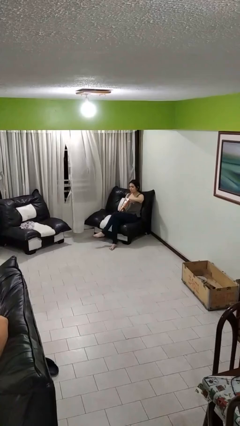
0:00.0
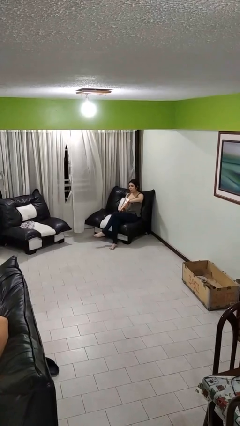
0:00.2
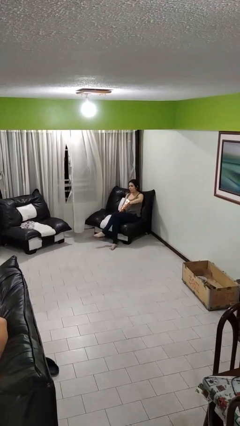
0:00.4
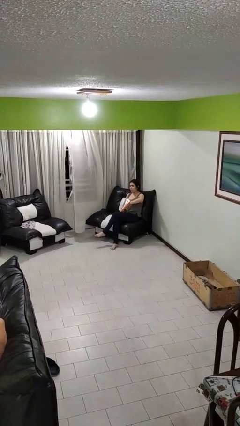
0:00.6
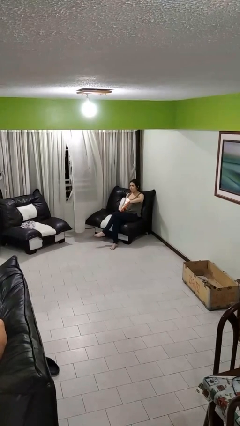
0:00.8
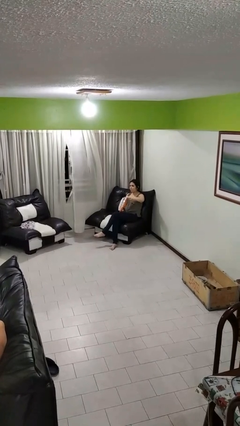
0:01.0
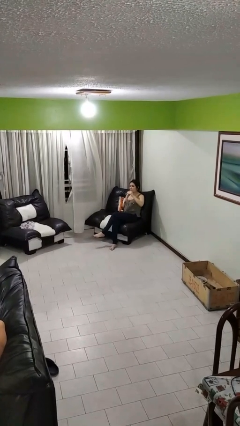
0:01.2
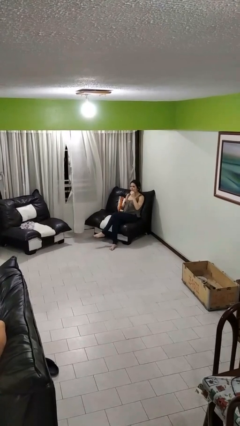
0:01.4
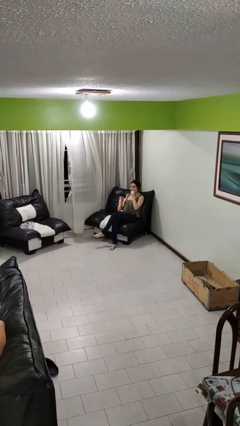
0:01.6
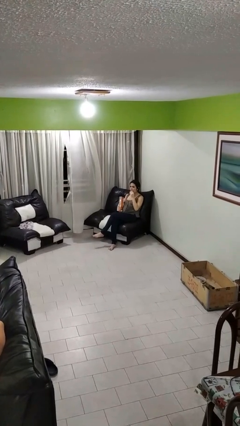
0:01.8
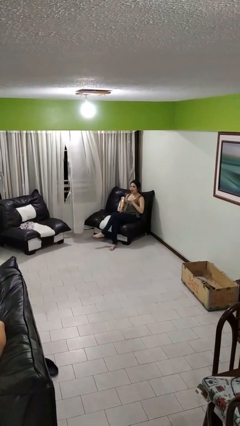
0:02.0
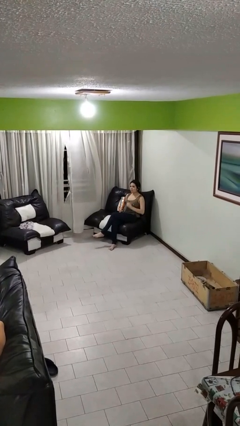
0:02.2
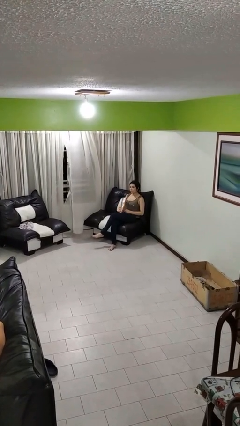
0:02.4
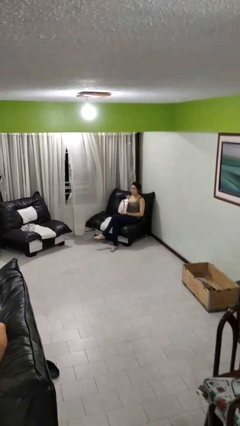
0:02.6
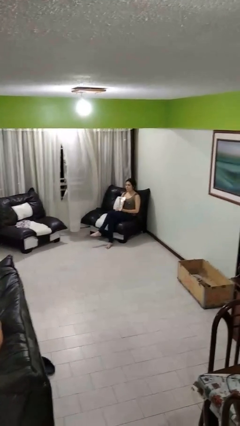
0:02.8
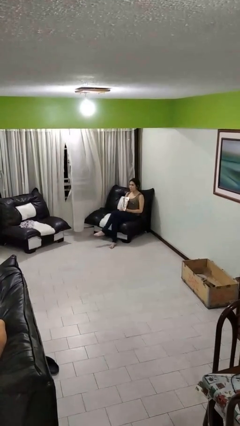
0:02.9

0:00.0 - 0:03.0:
person eats snack from bag

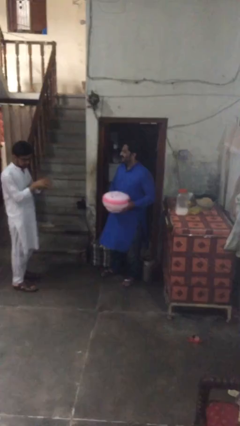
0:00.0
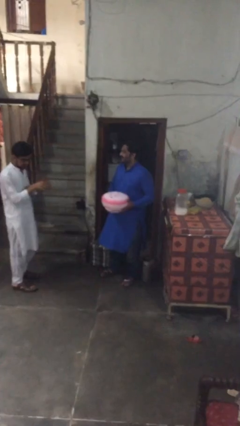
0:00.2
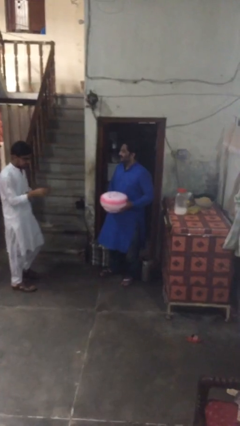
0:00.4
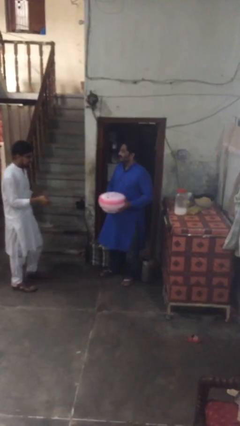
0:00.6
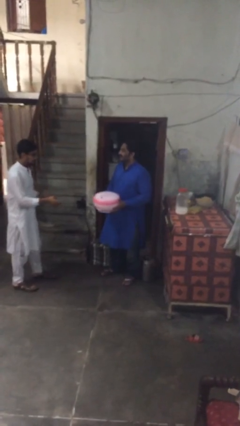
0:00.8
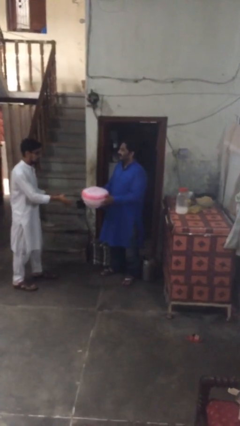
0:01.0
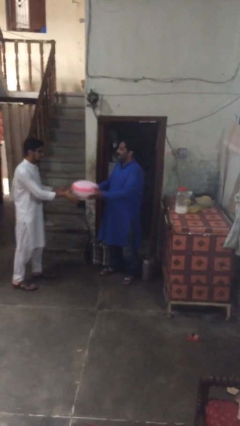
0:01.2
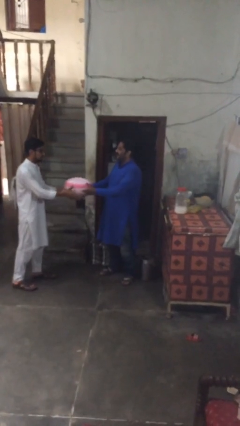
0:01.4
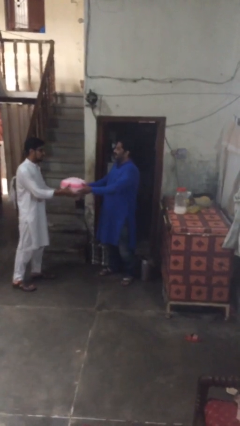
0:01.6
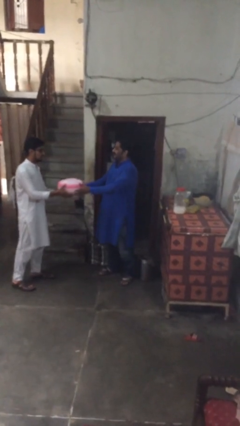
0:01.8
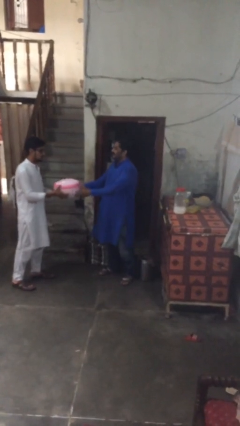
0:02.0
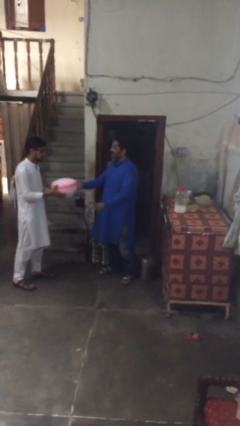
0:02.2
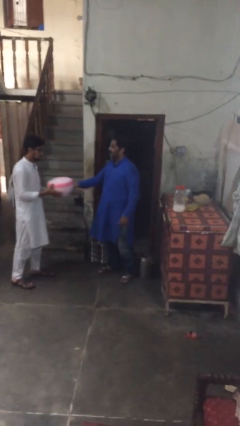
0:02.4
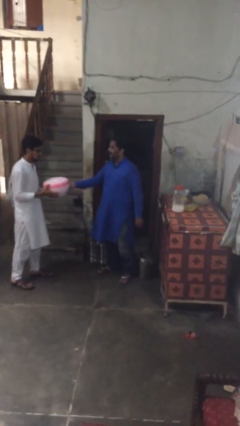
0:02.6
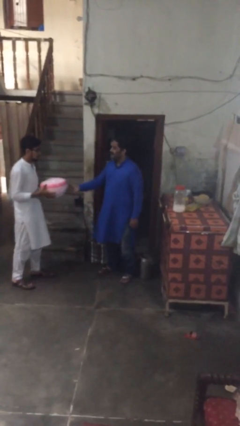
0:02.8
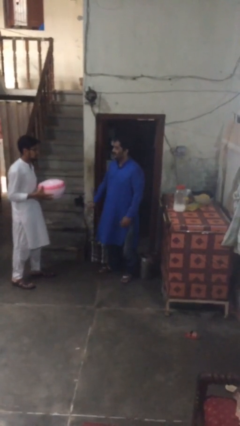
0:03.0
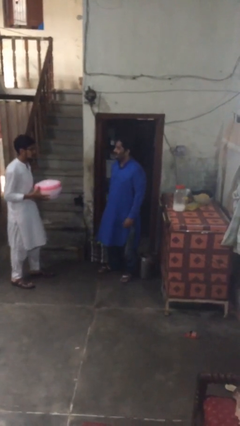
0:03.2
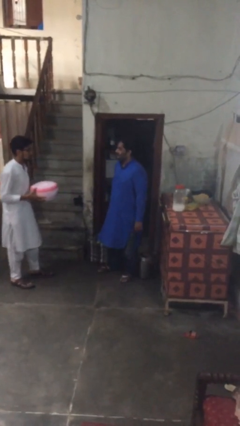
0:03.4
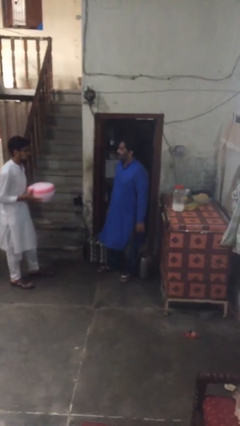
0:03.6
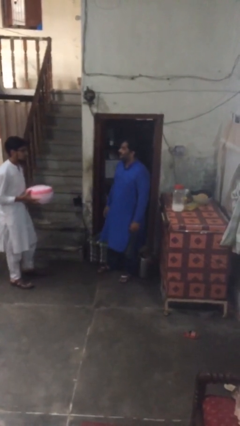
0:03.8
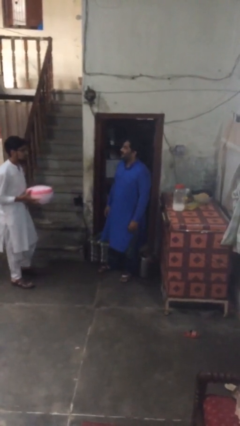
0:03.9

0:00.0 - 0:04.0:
person transfers object to person

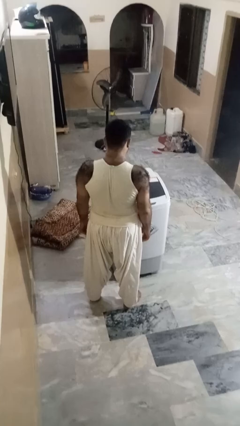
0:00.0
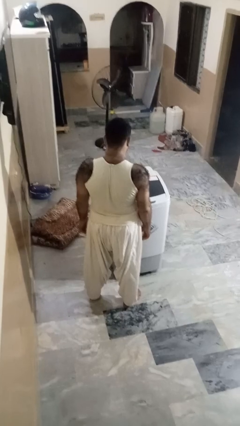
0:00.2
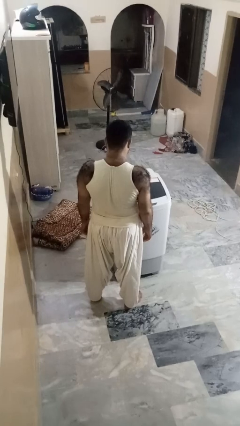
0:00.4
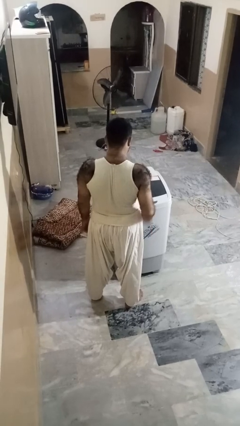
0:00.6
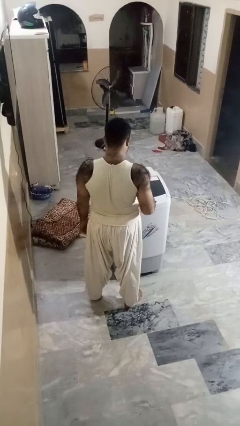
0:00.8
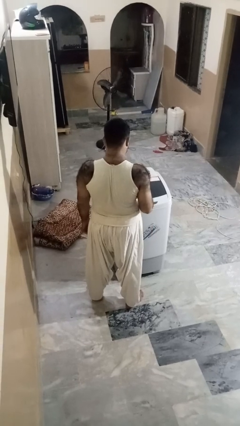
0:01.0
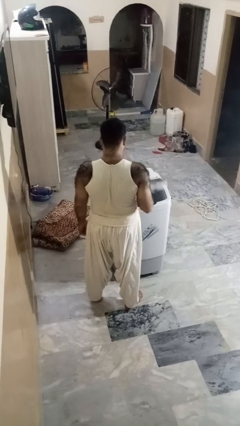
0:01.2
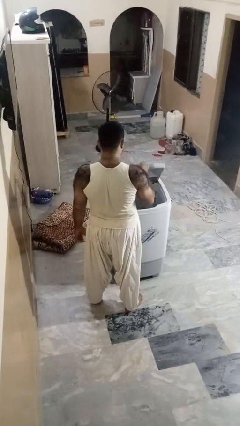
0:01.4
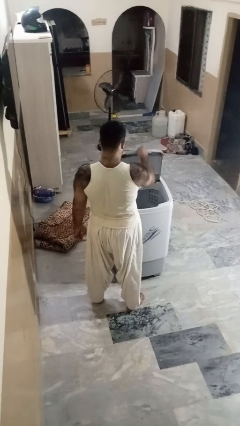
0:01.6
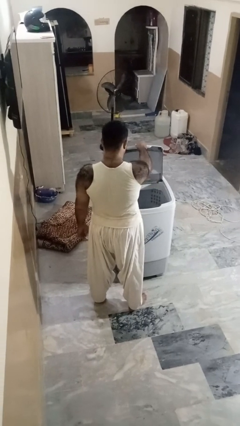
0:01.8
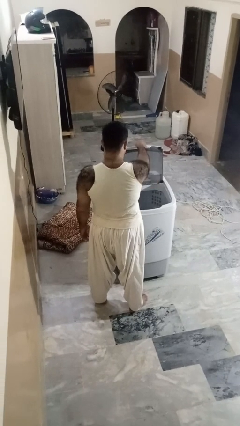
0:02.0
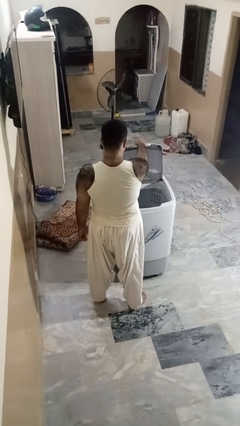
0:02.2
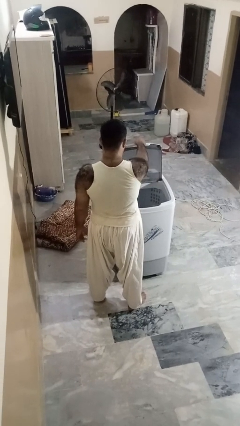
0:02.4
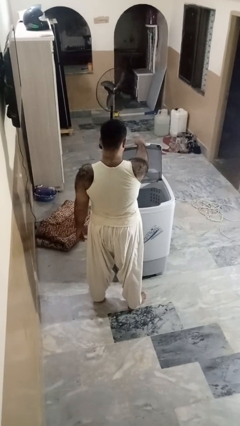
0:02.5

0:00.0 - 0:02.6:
person opens clothes washer

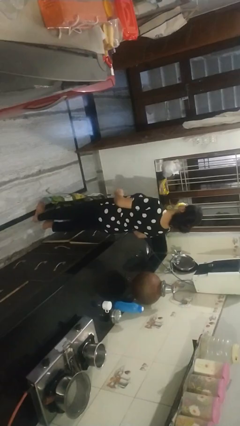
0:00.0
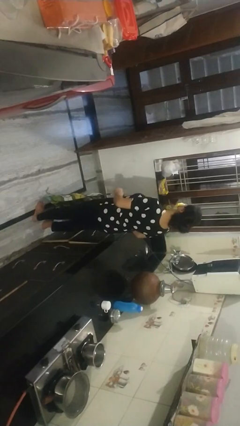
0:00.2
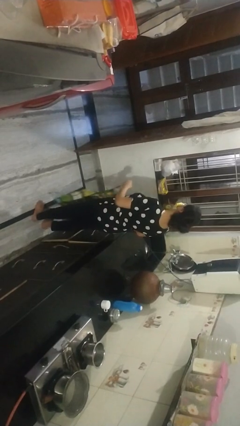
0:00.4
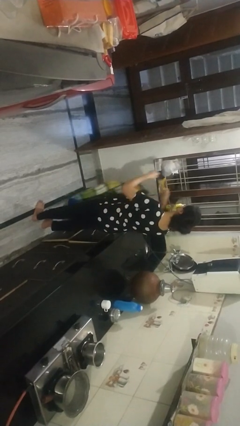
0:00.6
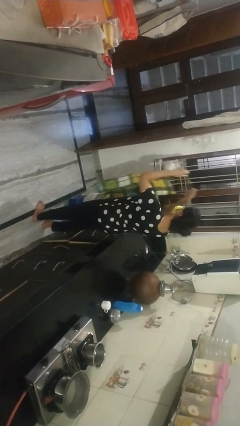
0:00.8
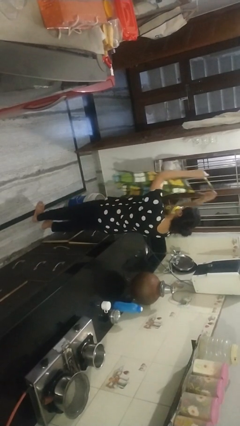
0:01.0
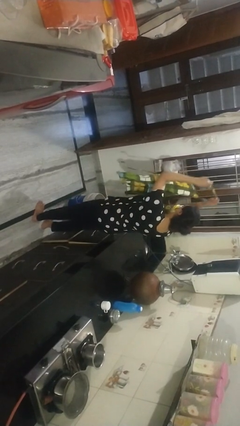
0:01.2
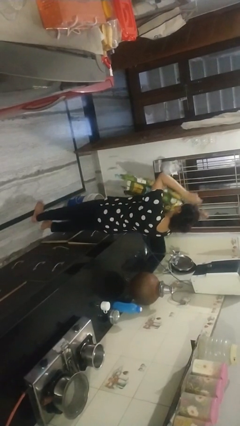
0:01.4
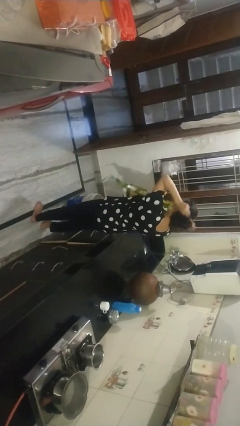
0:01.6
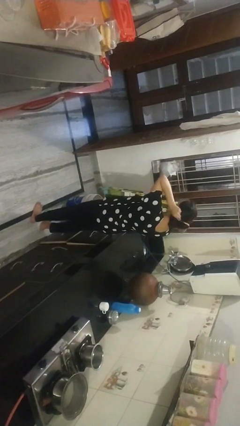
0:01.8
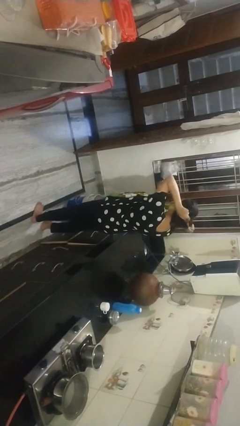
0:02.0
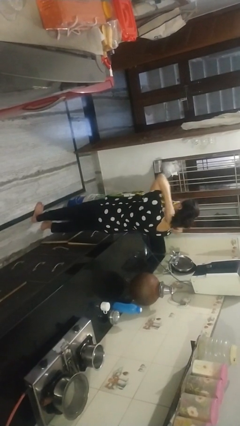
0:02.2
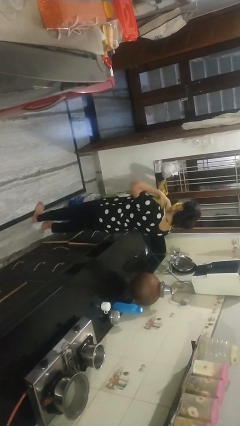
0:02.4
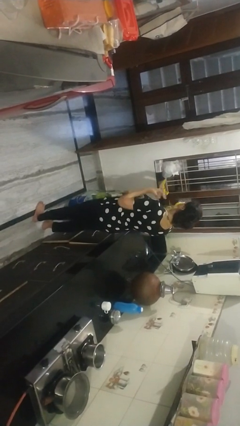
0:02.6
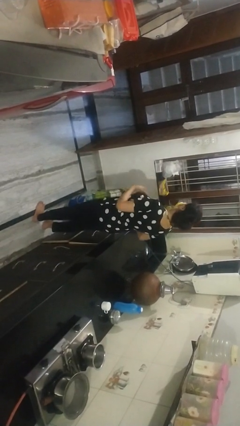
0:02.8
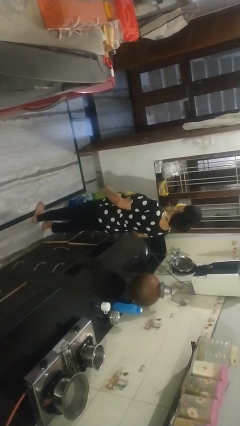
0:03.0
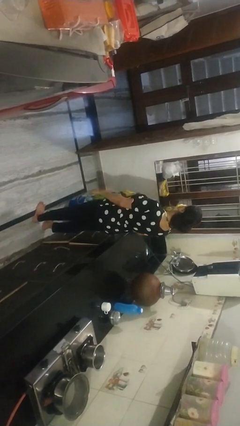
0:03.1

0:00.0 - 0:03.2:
person puts on apron

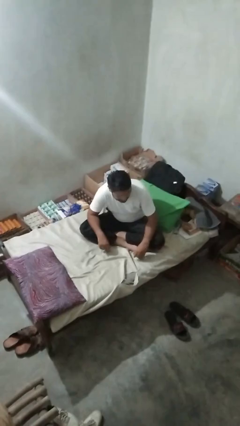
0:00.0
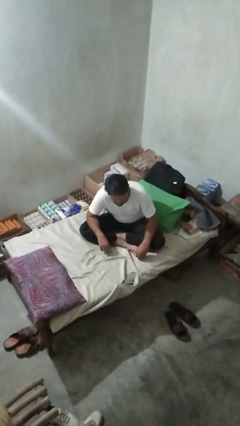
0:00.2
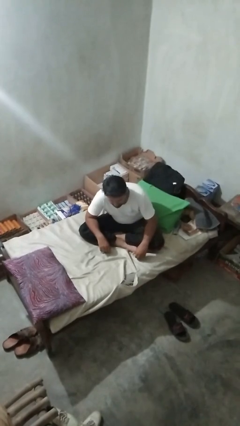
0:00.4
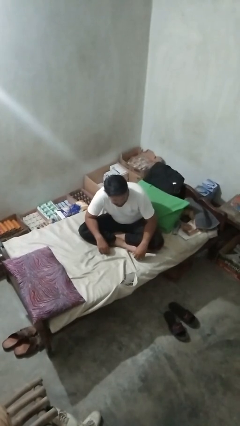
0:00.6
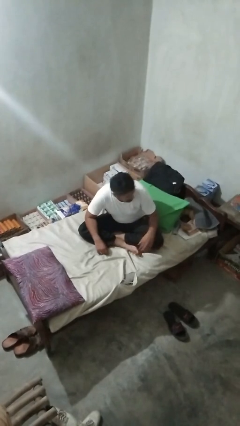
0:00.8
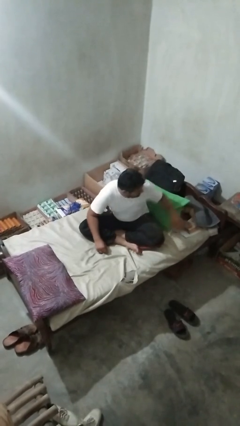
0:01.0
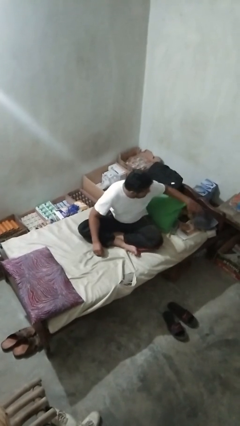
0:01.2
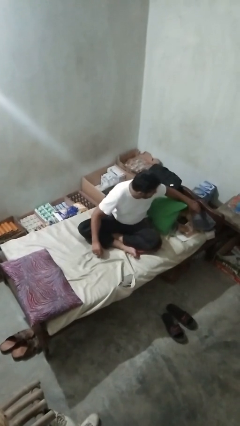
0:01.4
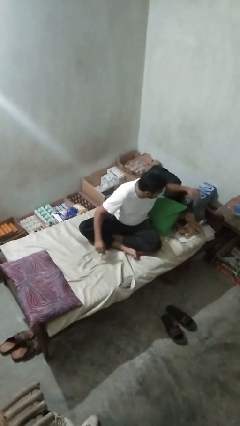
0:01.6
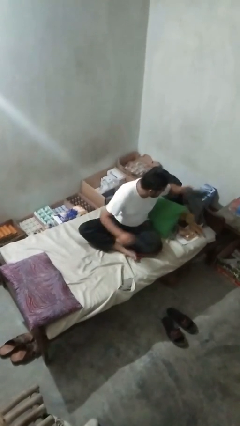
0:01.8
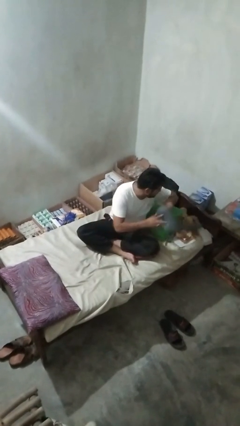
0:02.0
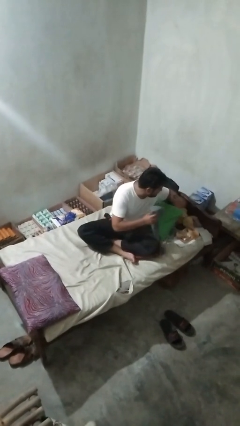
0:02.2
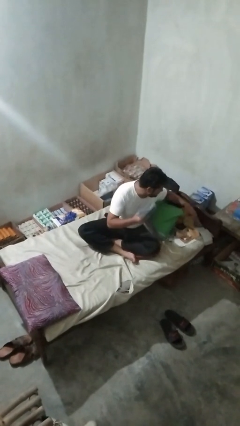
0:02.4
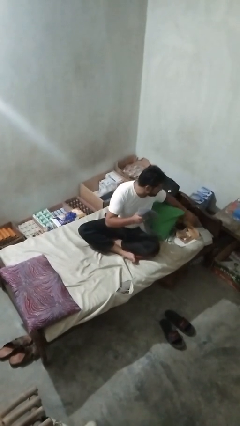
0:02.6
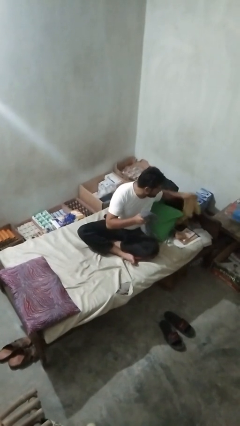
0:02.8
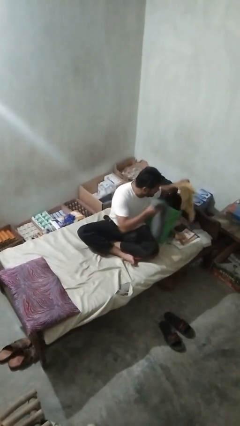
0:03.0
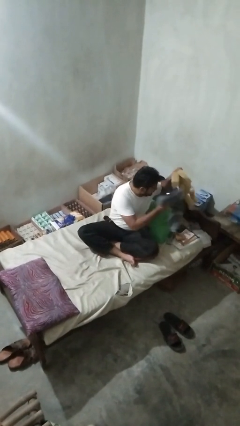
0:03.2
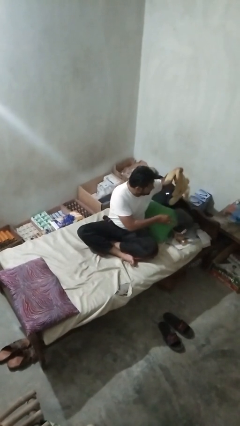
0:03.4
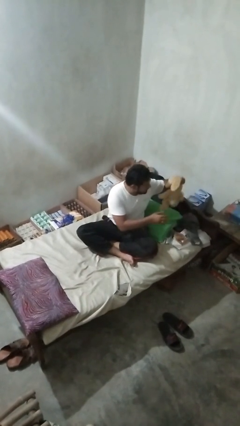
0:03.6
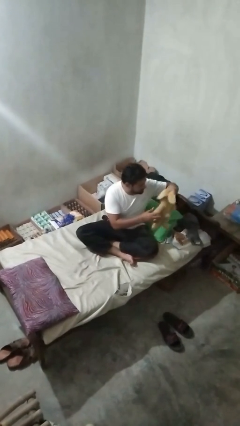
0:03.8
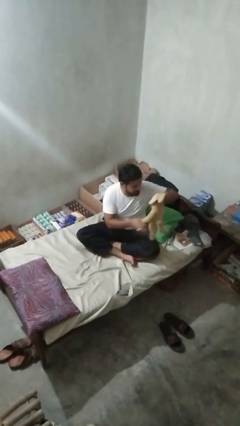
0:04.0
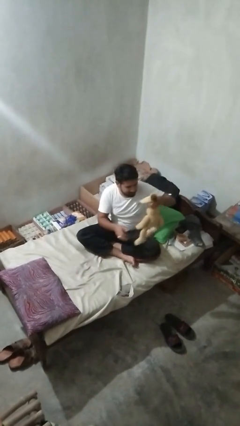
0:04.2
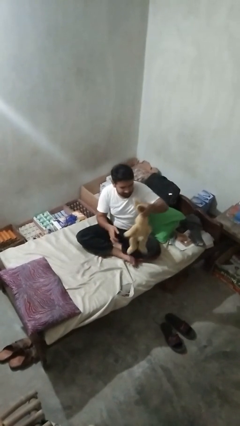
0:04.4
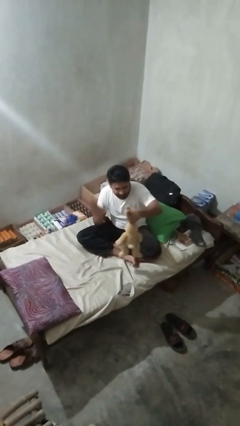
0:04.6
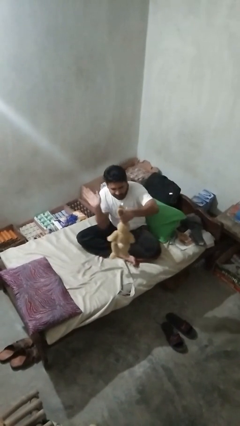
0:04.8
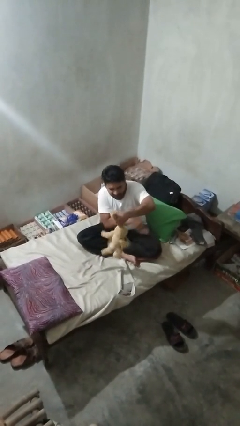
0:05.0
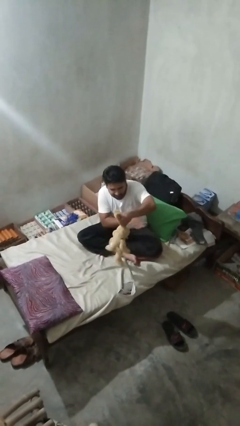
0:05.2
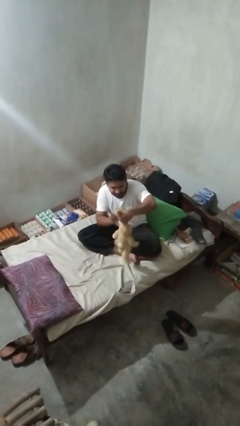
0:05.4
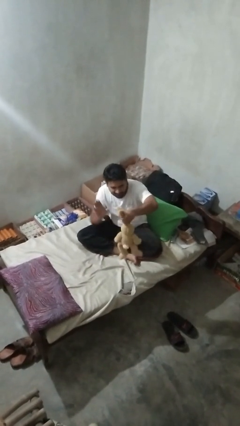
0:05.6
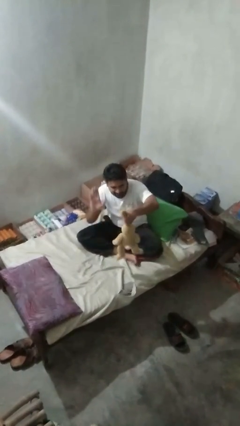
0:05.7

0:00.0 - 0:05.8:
person searches under bed
